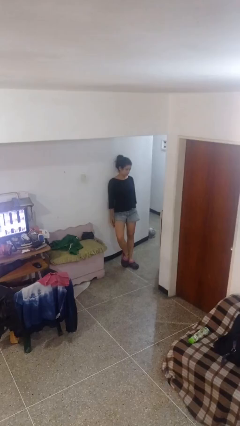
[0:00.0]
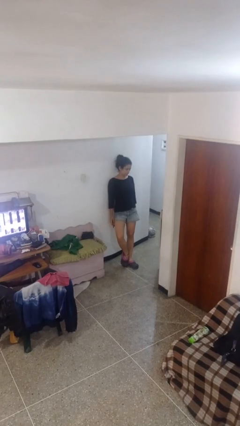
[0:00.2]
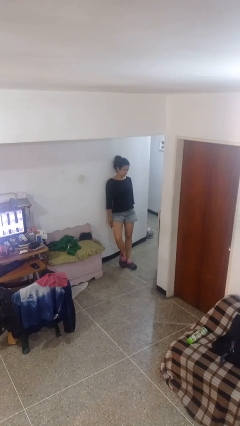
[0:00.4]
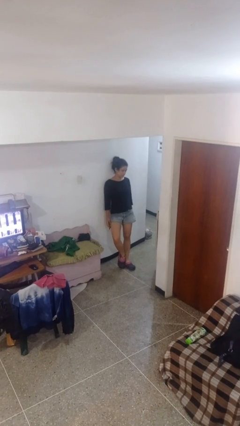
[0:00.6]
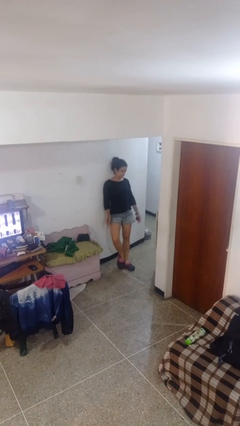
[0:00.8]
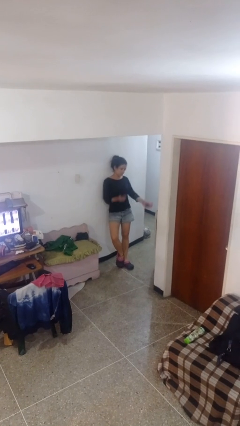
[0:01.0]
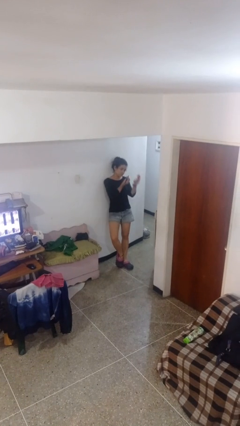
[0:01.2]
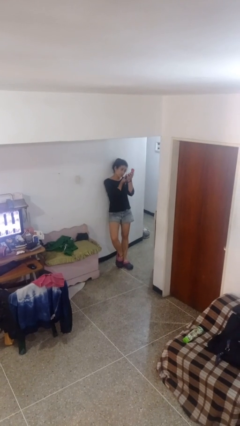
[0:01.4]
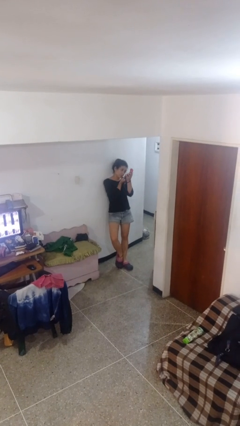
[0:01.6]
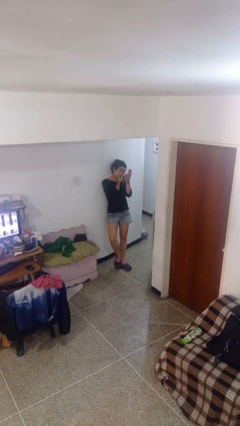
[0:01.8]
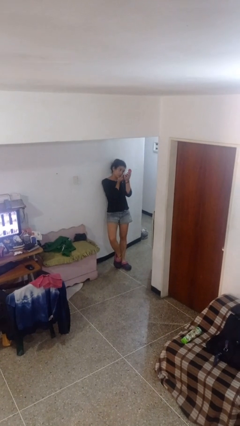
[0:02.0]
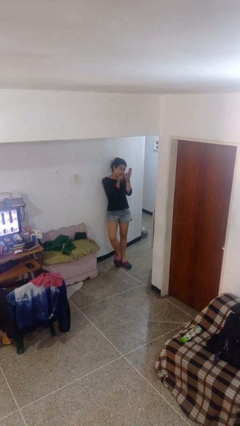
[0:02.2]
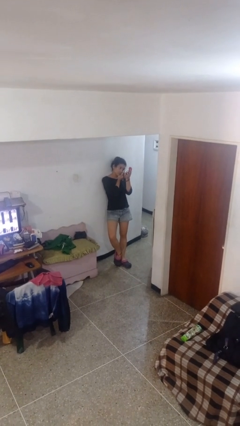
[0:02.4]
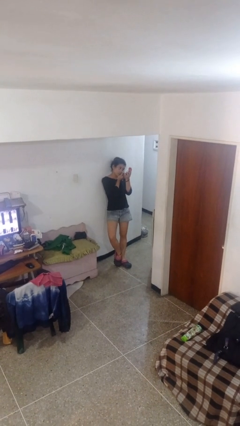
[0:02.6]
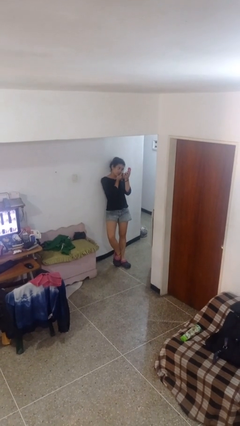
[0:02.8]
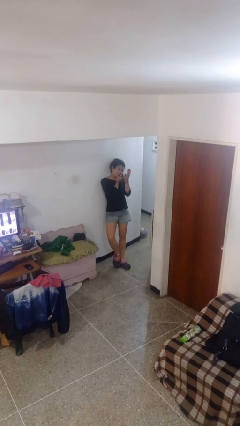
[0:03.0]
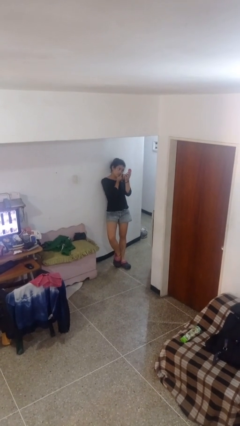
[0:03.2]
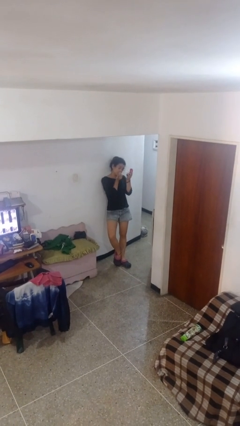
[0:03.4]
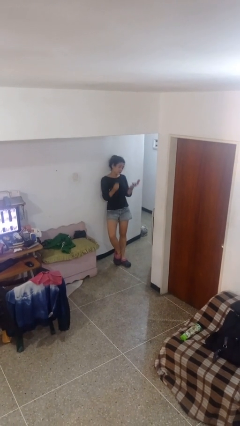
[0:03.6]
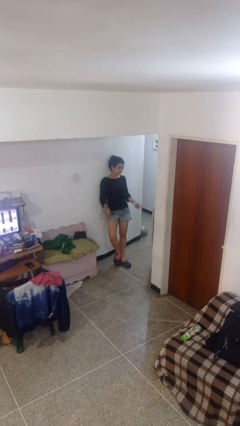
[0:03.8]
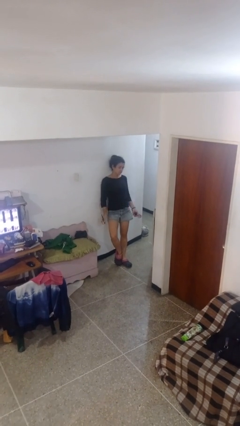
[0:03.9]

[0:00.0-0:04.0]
person applies eye makeup

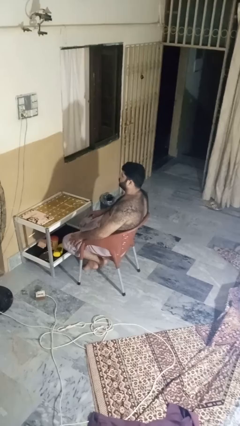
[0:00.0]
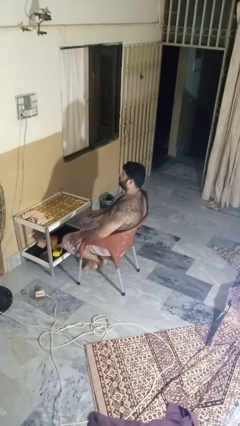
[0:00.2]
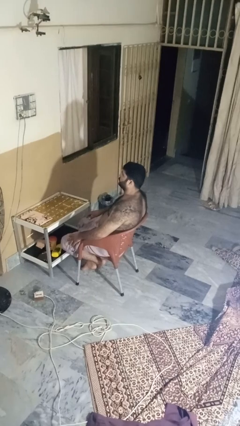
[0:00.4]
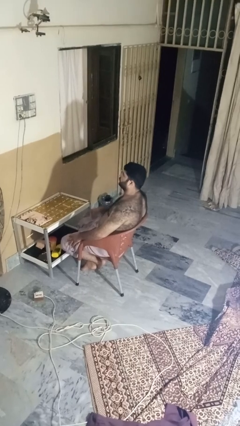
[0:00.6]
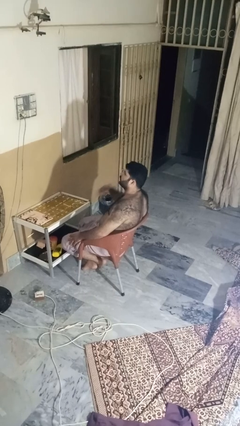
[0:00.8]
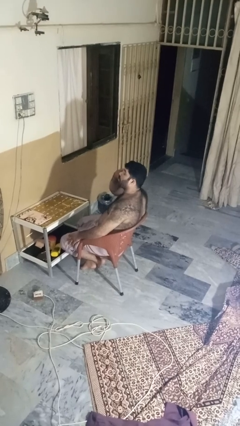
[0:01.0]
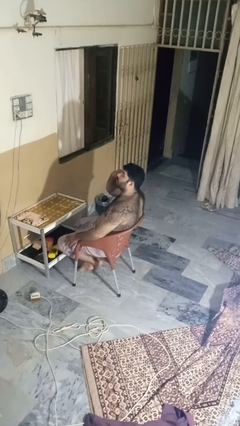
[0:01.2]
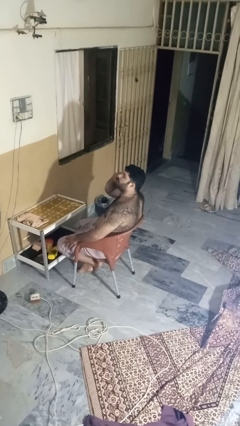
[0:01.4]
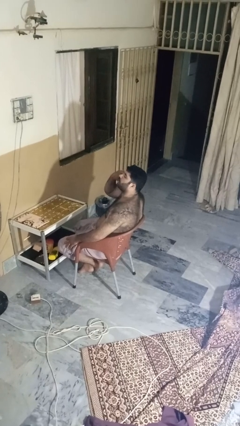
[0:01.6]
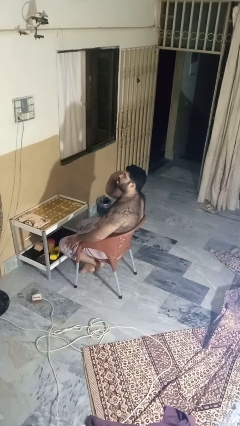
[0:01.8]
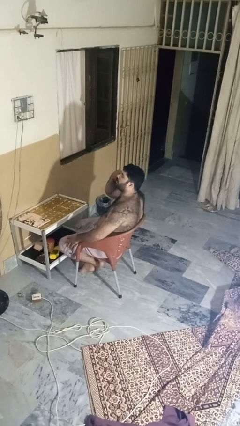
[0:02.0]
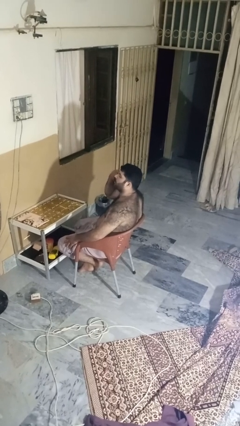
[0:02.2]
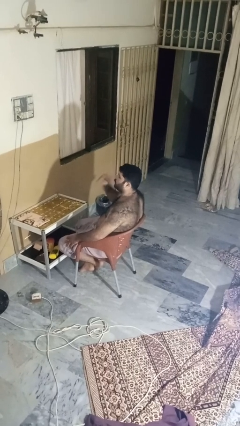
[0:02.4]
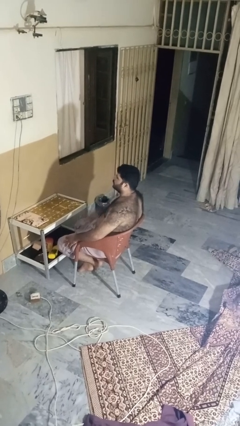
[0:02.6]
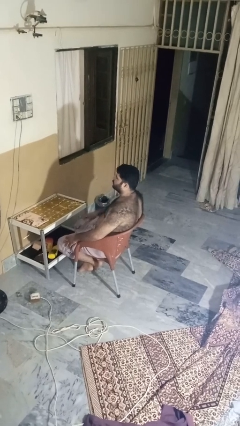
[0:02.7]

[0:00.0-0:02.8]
person rubs eyes

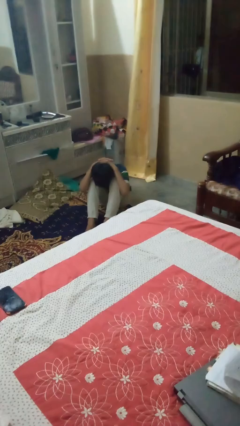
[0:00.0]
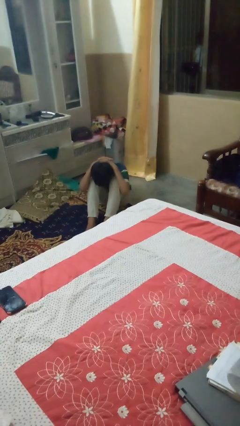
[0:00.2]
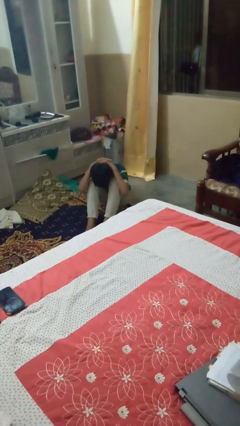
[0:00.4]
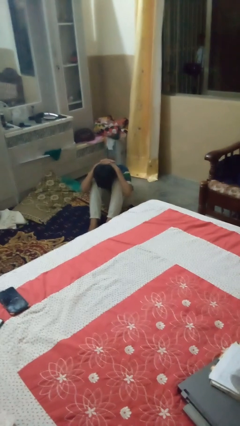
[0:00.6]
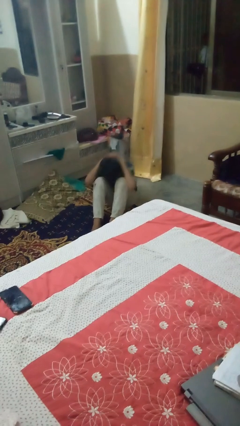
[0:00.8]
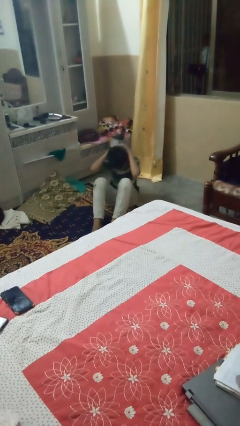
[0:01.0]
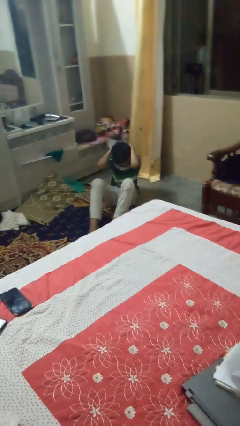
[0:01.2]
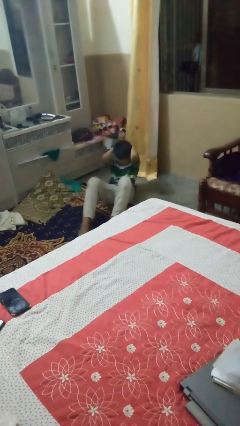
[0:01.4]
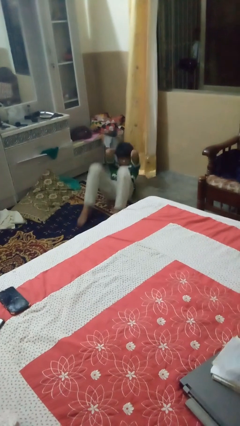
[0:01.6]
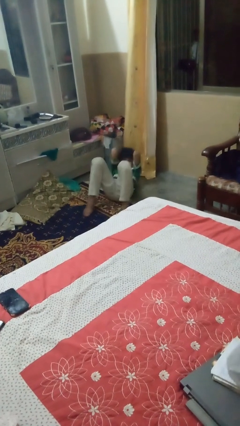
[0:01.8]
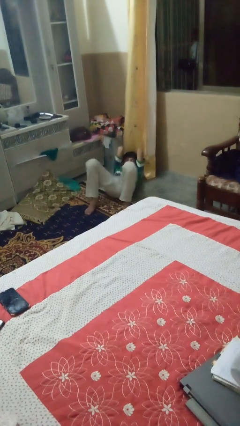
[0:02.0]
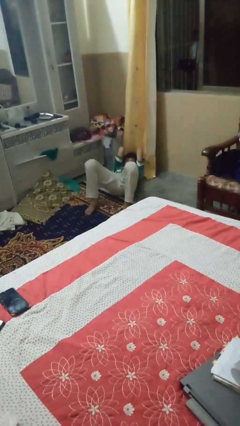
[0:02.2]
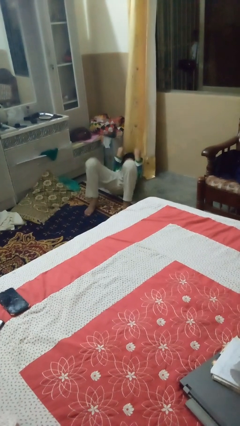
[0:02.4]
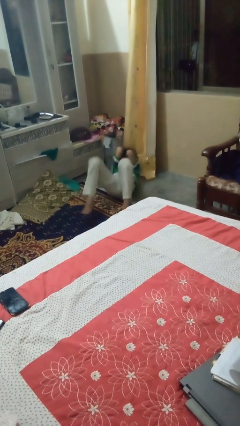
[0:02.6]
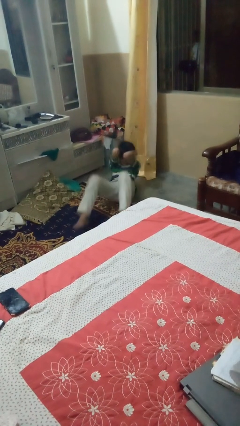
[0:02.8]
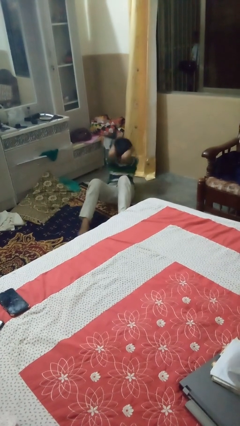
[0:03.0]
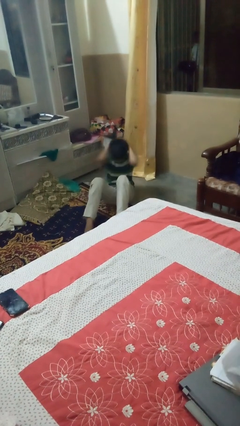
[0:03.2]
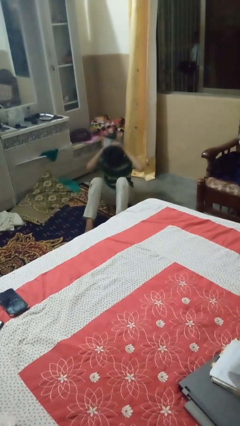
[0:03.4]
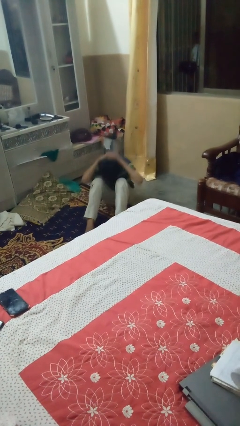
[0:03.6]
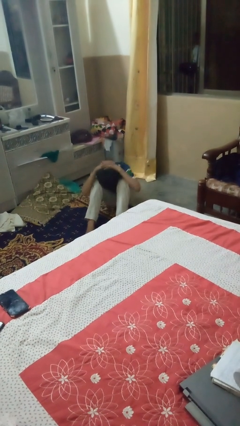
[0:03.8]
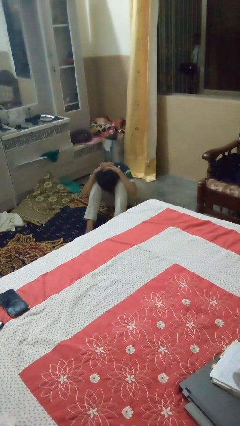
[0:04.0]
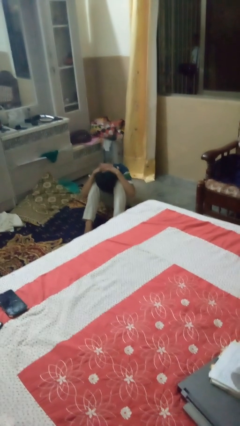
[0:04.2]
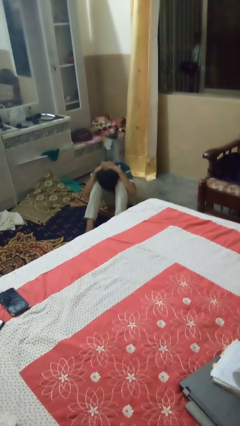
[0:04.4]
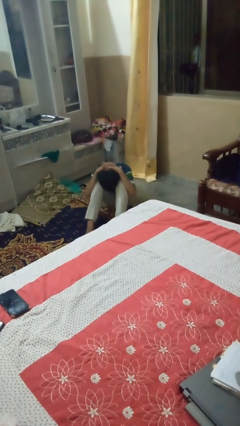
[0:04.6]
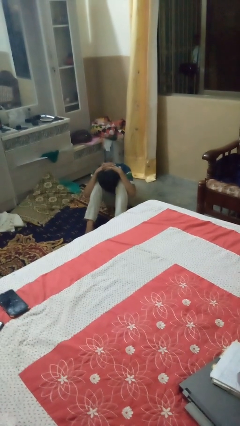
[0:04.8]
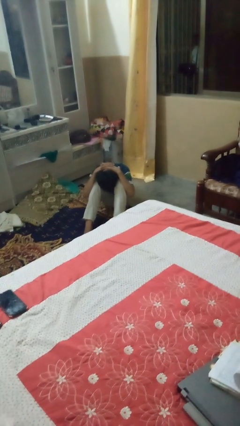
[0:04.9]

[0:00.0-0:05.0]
person exercises with situp

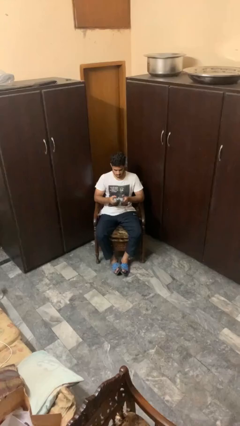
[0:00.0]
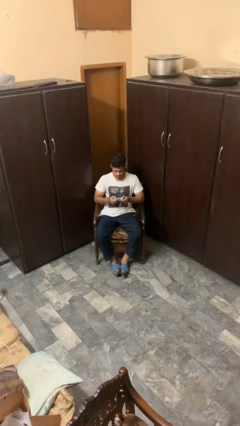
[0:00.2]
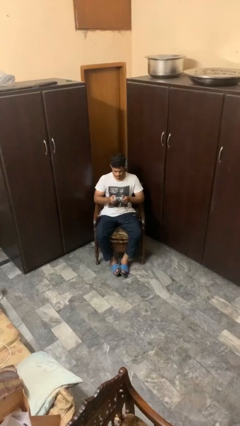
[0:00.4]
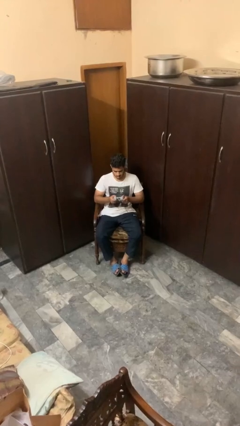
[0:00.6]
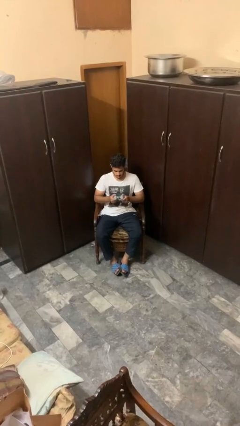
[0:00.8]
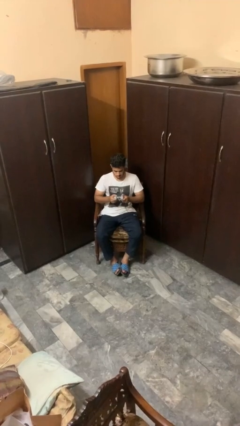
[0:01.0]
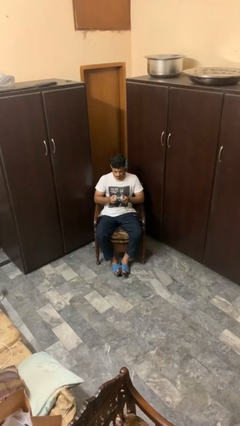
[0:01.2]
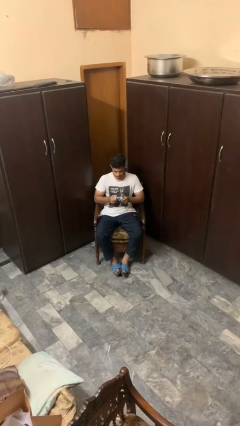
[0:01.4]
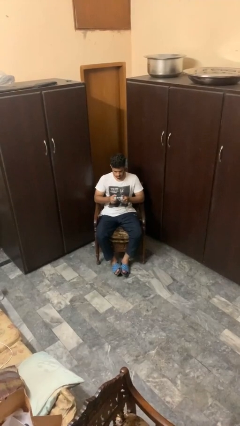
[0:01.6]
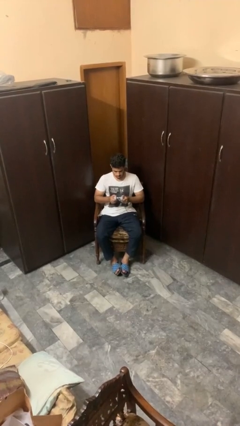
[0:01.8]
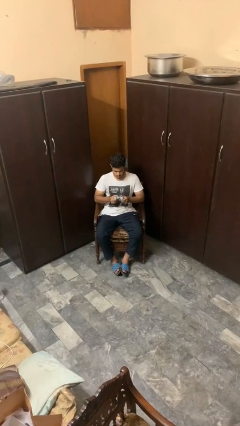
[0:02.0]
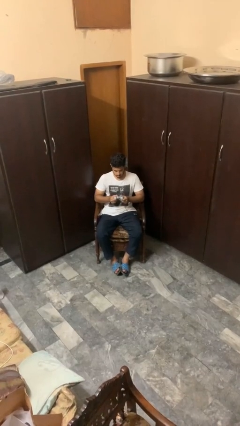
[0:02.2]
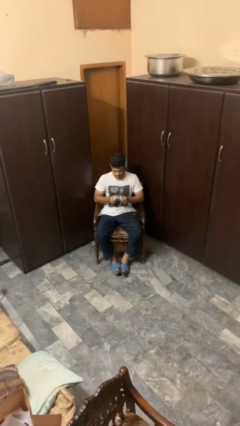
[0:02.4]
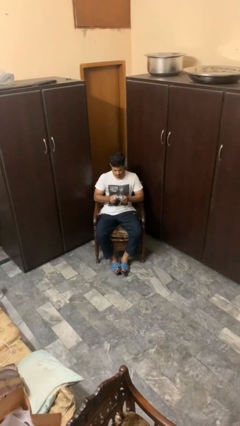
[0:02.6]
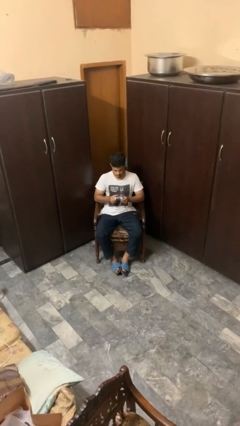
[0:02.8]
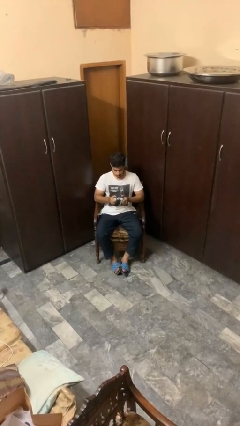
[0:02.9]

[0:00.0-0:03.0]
person interacts with handheld game

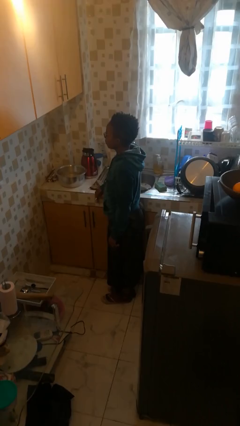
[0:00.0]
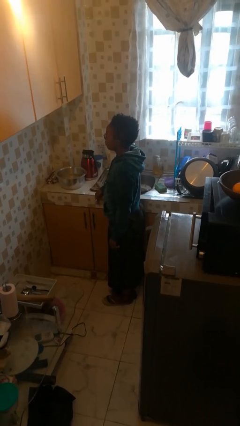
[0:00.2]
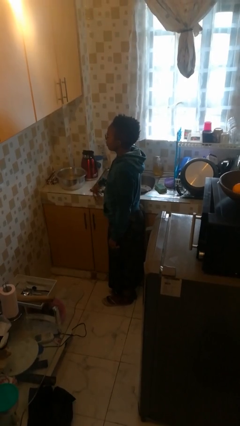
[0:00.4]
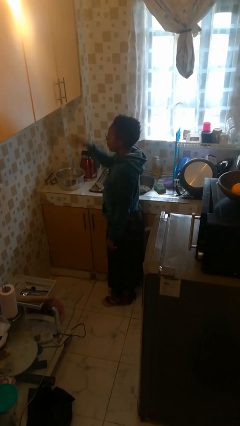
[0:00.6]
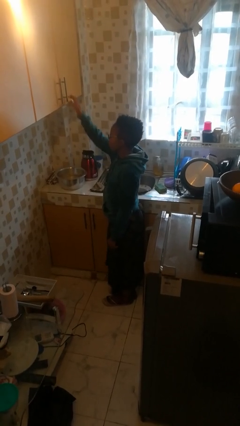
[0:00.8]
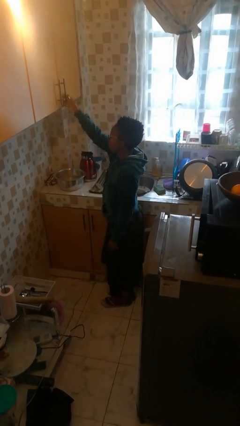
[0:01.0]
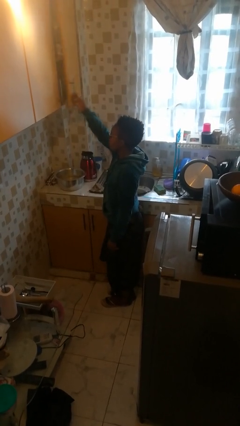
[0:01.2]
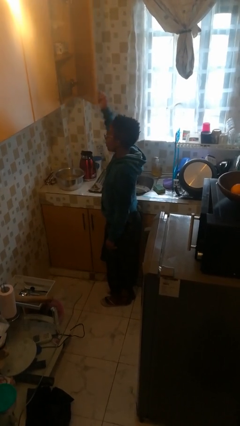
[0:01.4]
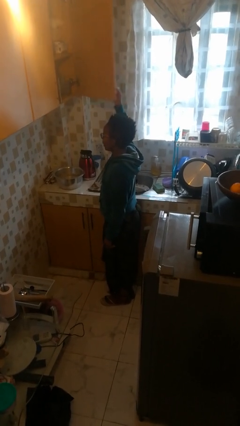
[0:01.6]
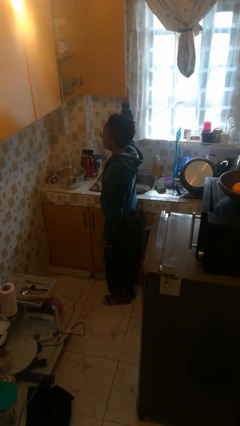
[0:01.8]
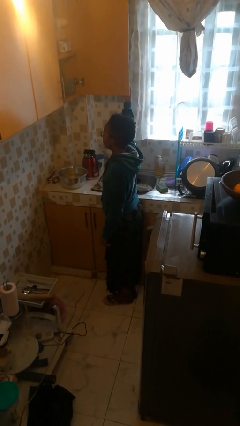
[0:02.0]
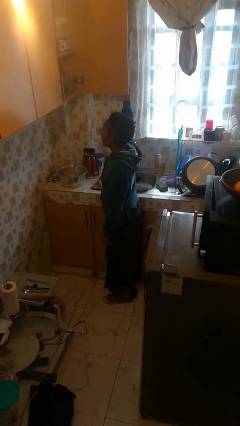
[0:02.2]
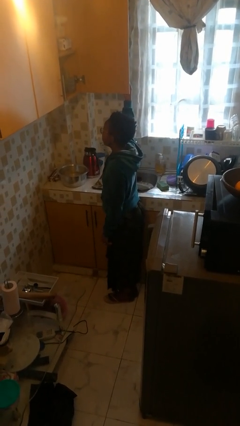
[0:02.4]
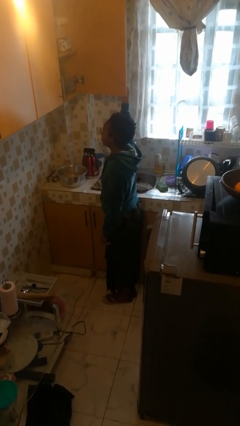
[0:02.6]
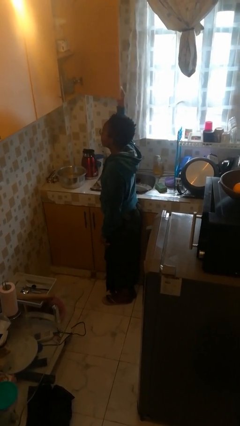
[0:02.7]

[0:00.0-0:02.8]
person opens cabinet

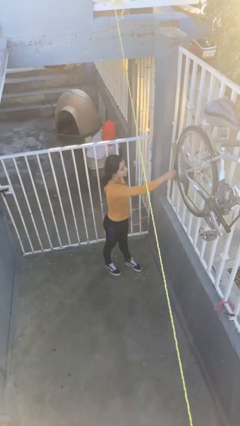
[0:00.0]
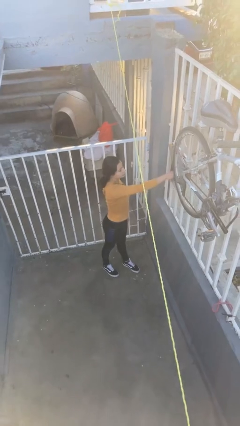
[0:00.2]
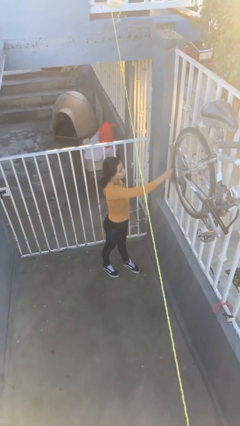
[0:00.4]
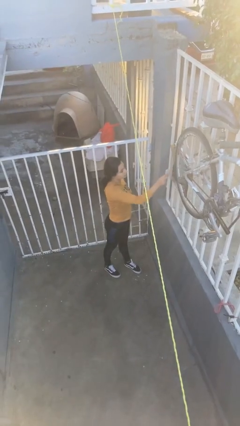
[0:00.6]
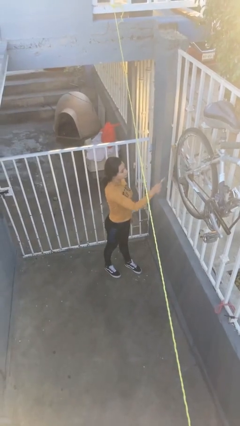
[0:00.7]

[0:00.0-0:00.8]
person takes letters from mailbox
